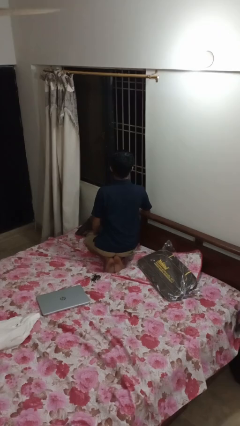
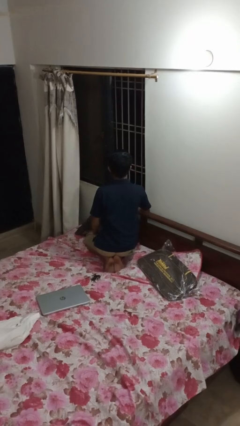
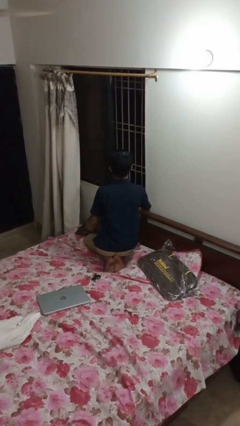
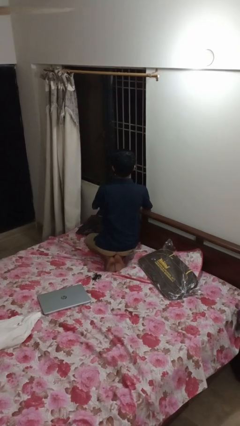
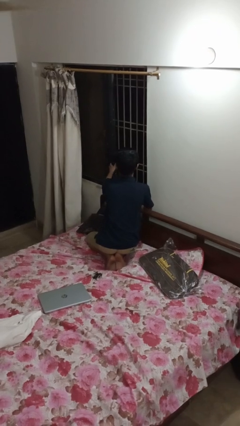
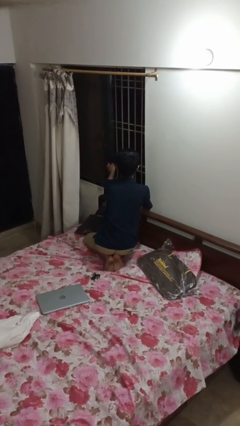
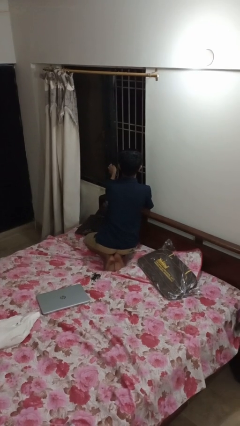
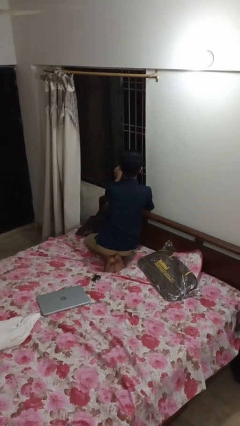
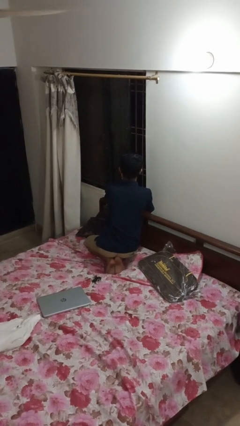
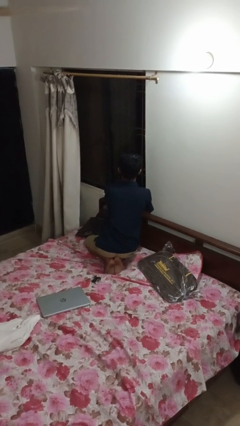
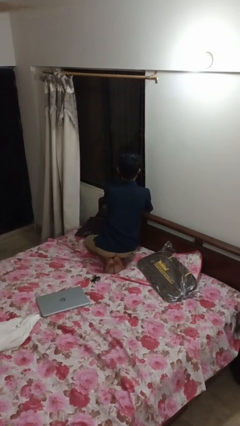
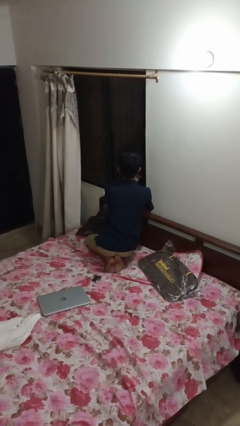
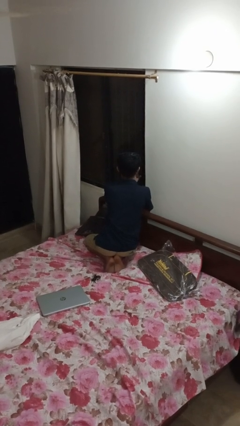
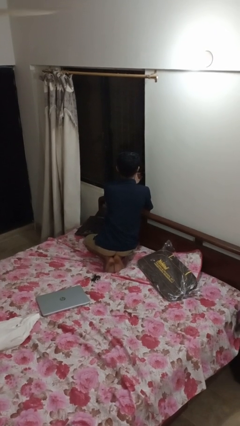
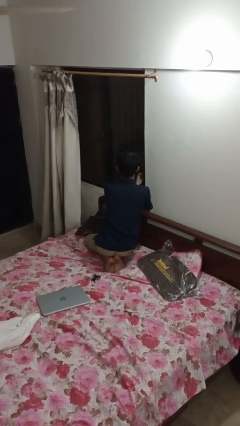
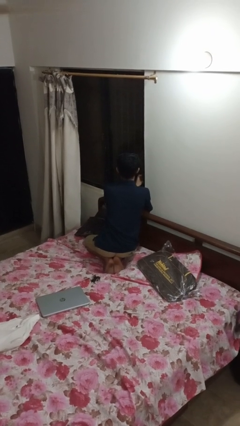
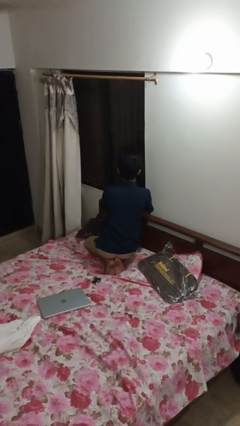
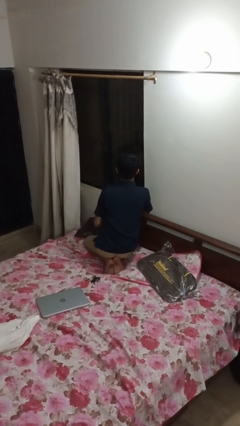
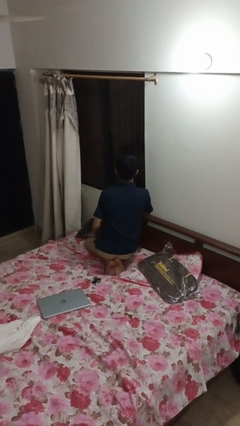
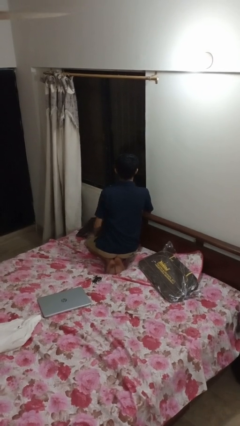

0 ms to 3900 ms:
person closes home window

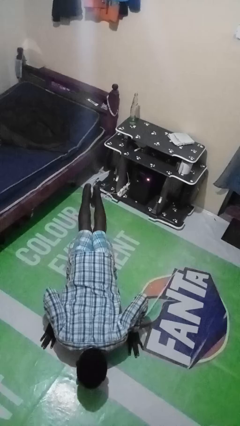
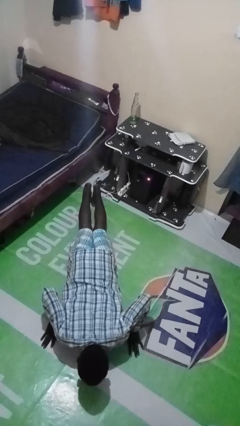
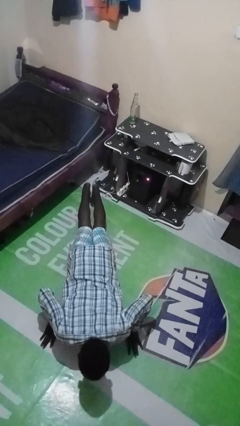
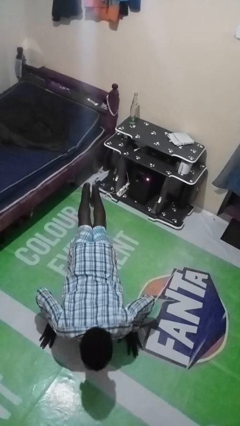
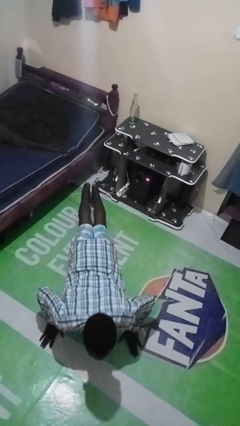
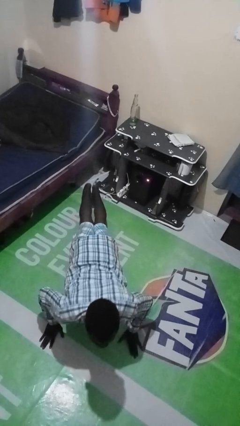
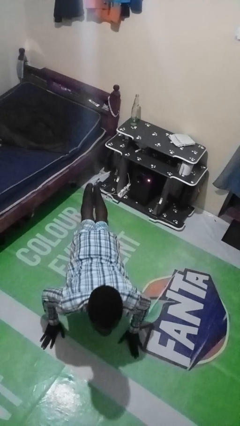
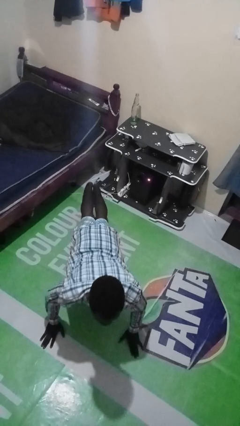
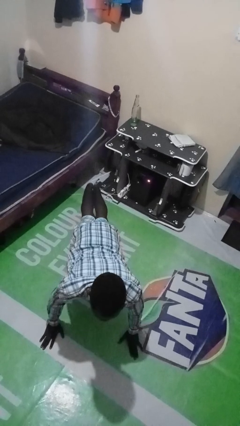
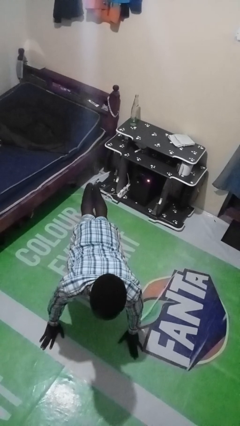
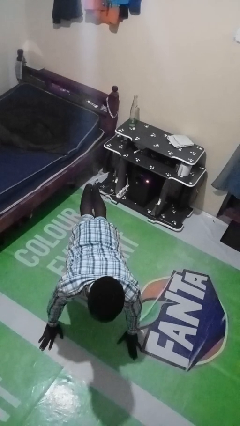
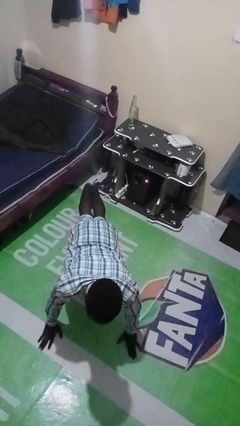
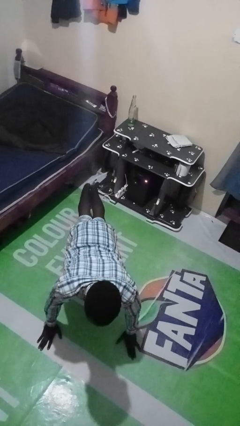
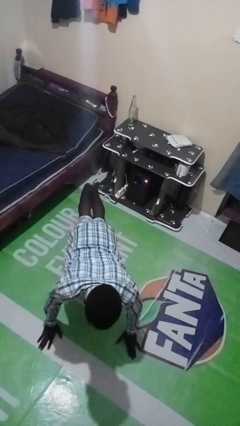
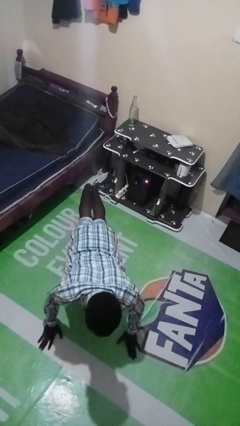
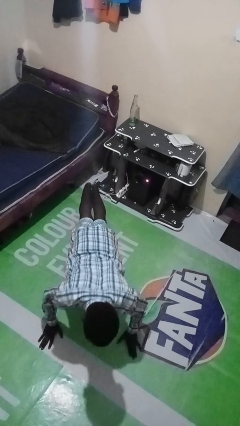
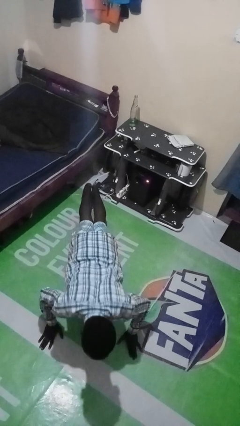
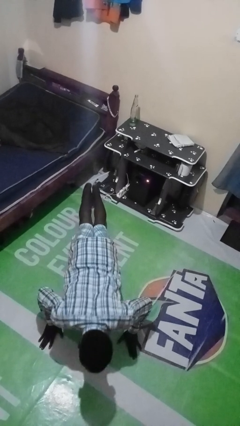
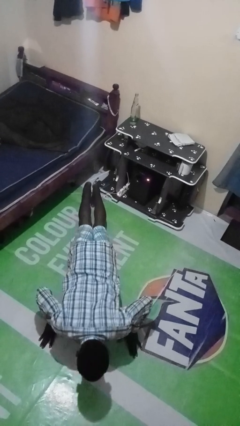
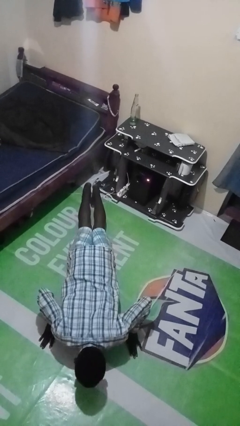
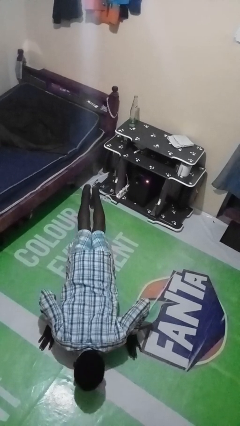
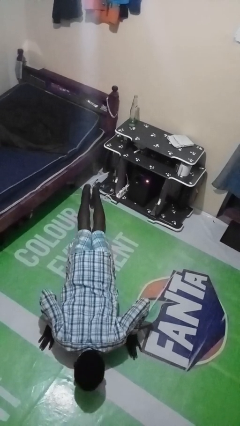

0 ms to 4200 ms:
person exercises with pushup

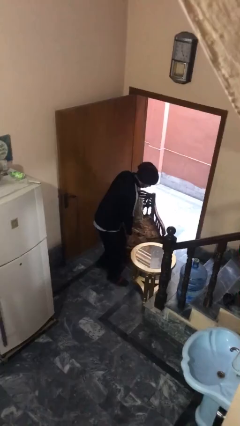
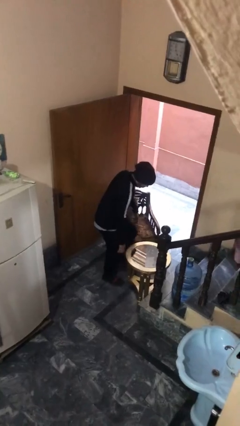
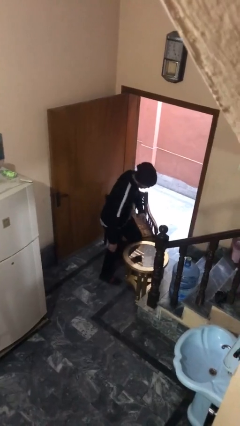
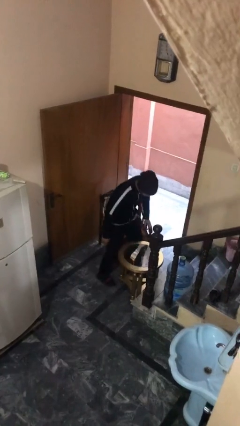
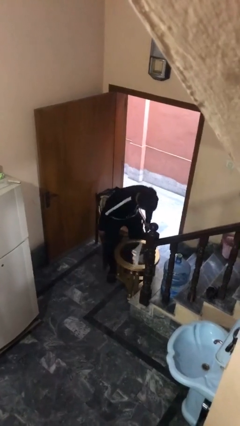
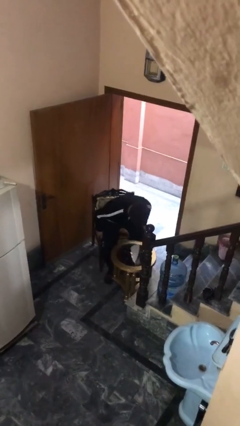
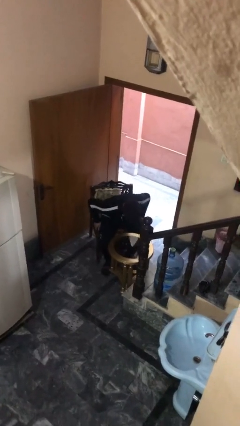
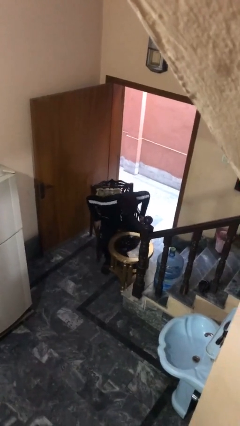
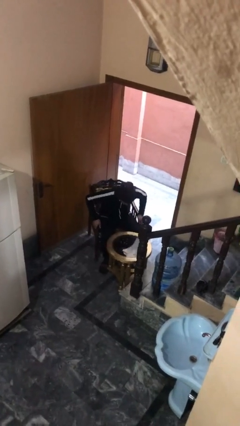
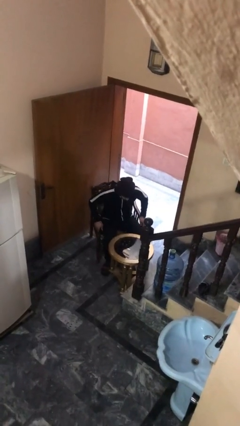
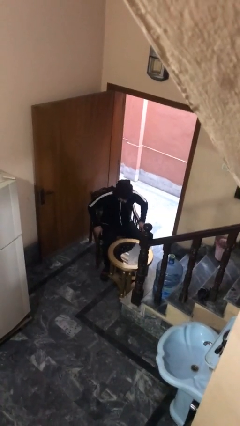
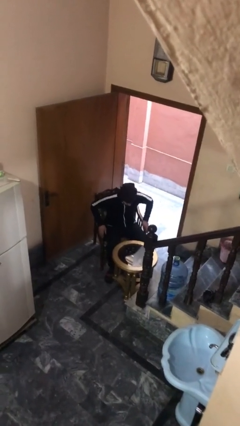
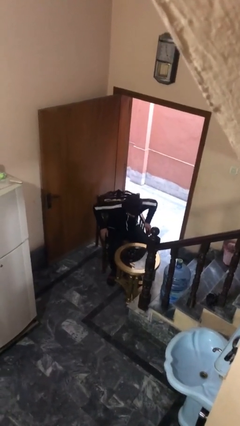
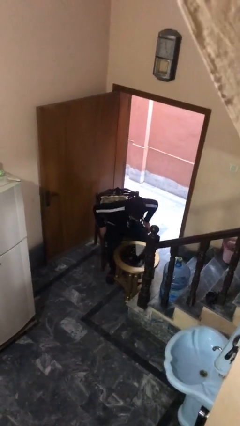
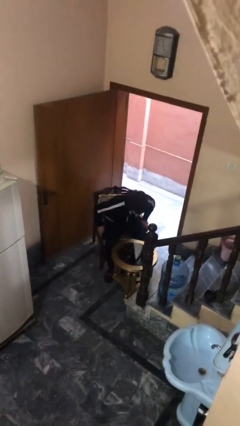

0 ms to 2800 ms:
person sits down

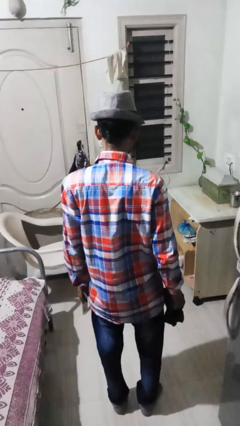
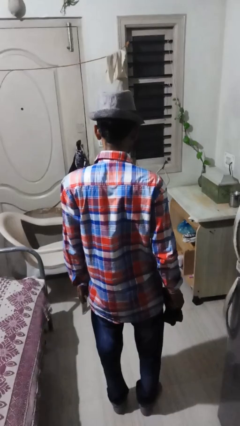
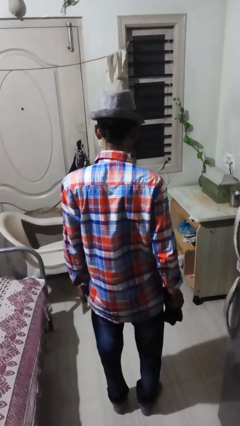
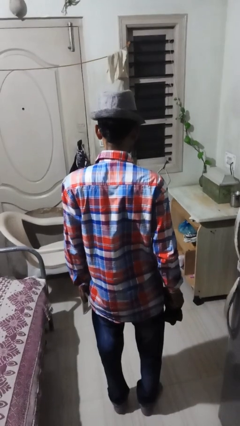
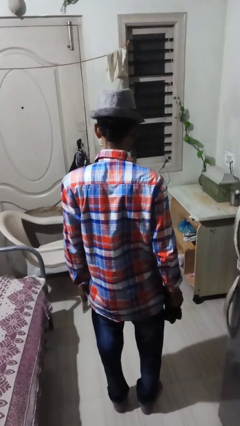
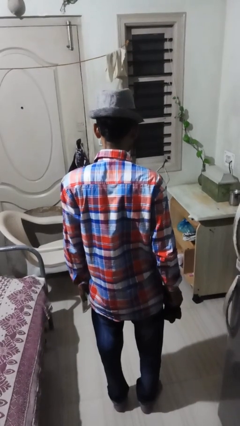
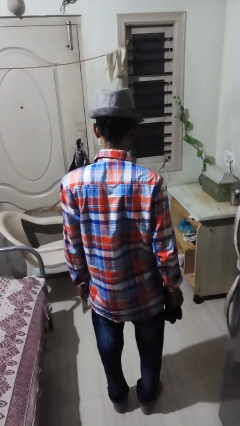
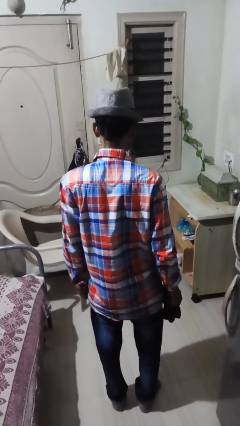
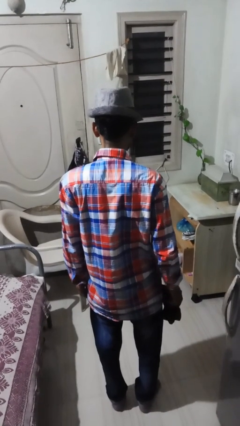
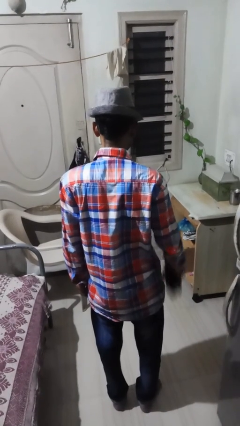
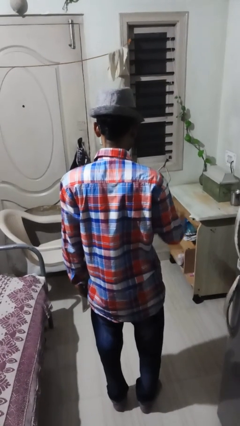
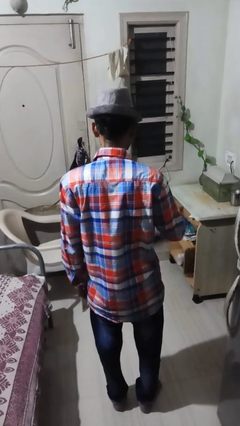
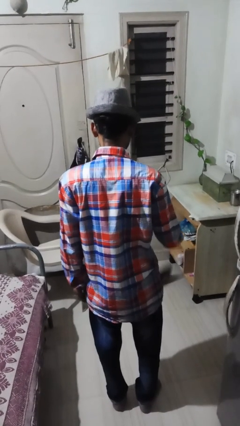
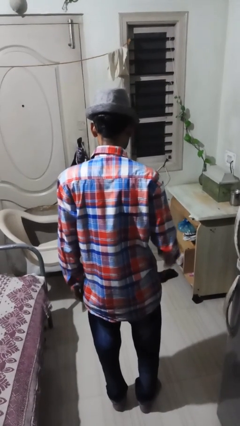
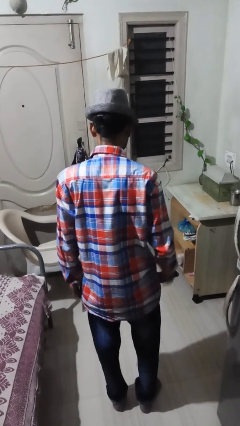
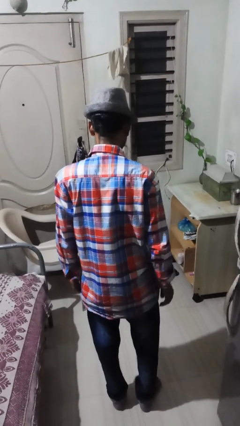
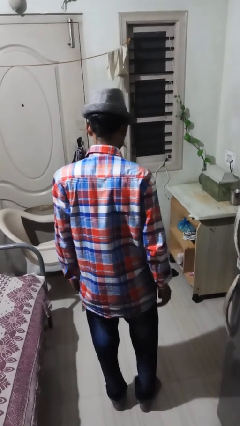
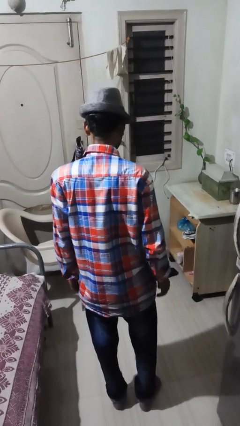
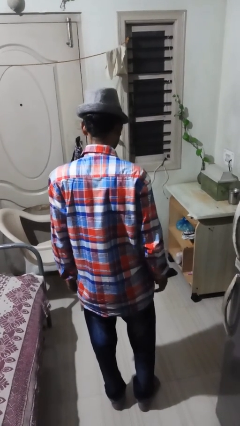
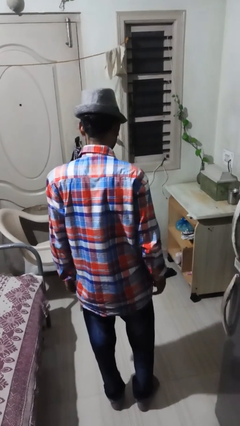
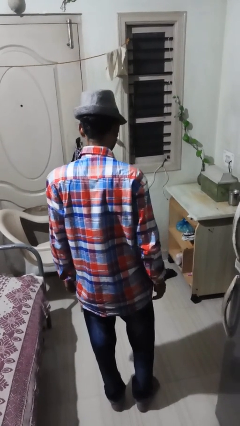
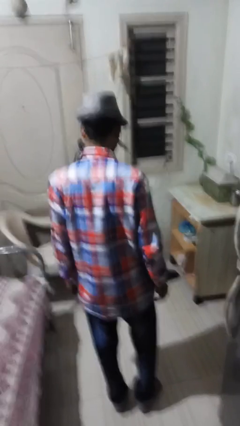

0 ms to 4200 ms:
person throws object to ground

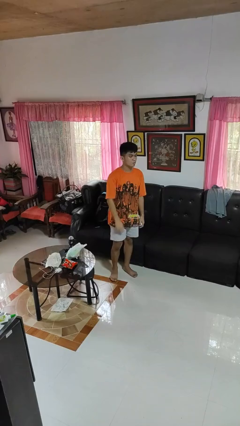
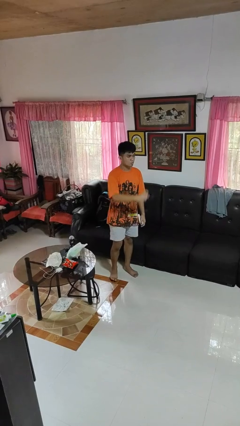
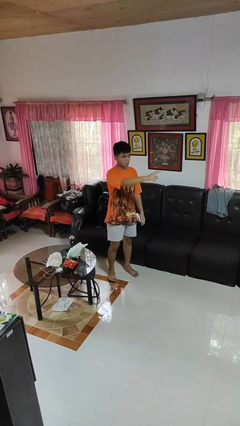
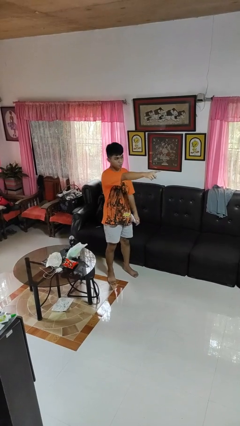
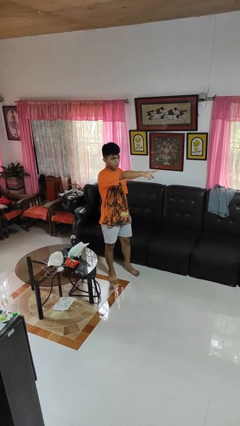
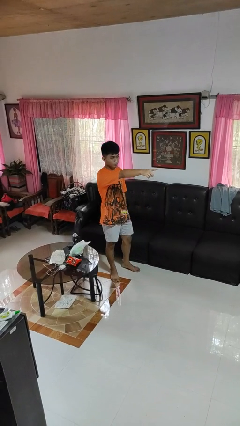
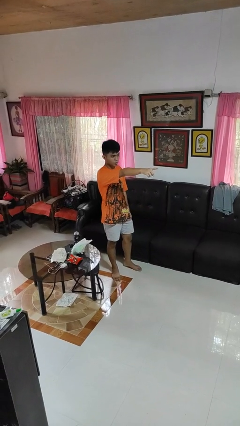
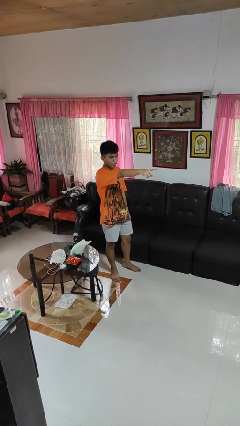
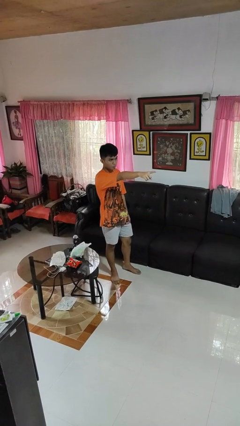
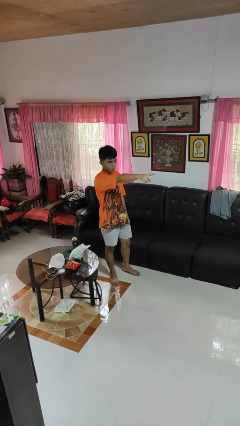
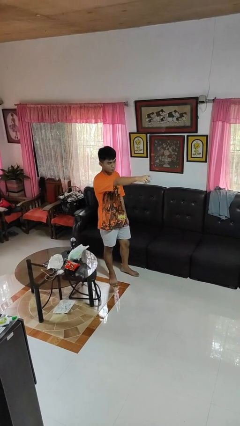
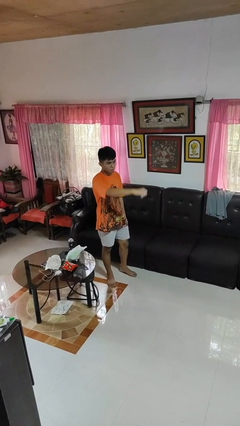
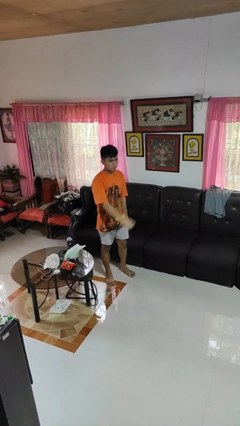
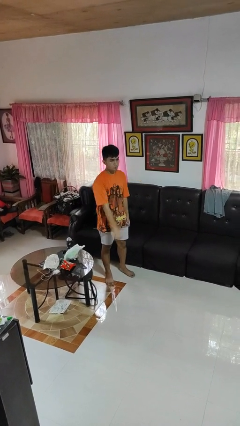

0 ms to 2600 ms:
person points at person
